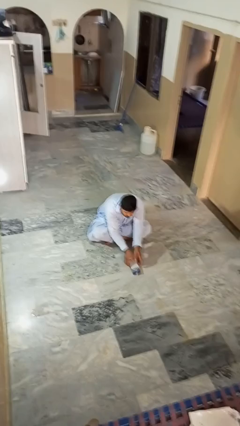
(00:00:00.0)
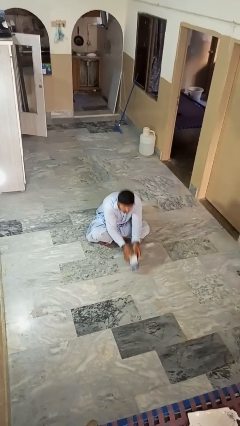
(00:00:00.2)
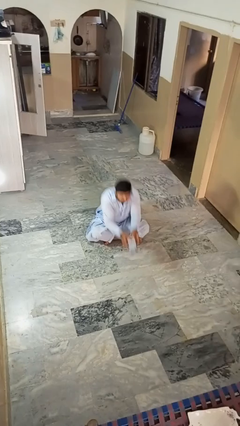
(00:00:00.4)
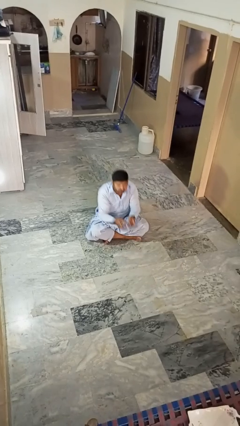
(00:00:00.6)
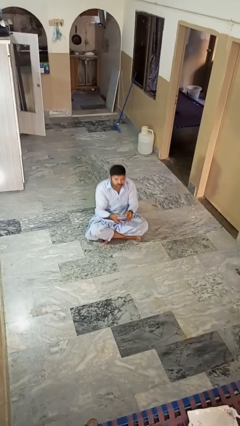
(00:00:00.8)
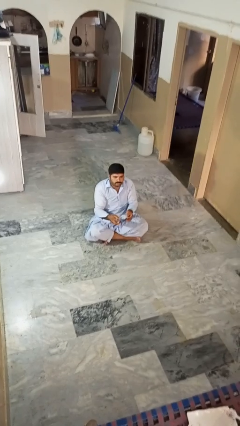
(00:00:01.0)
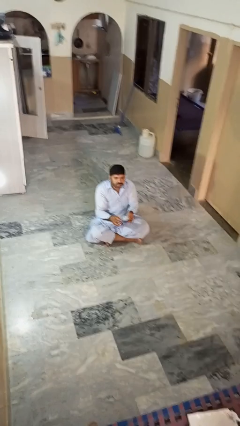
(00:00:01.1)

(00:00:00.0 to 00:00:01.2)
person picks up object from floor

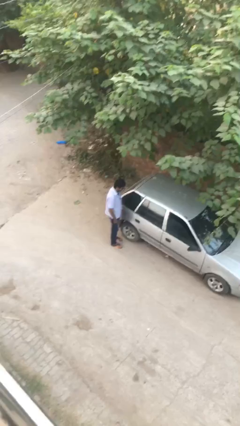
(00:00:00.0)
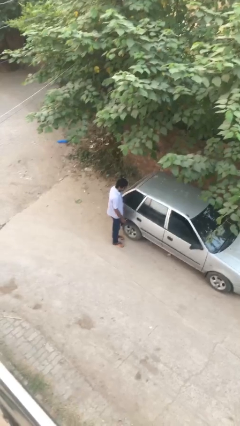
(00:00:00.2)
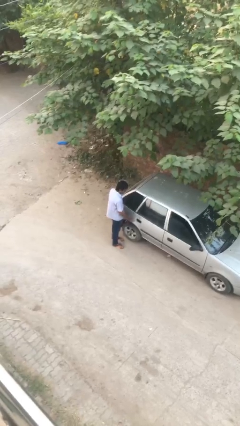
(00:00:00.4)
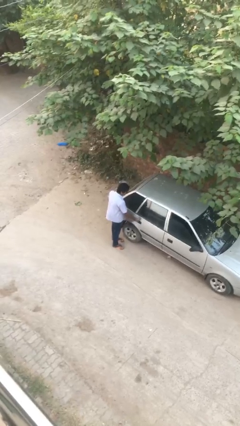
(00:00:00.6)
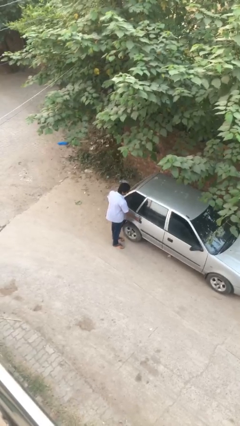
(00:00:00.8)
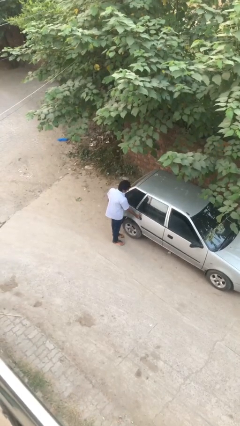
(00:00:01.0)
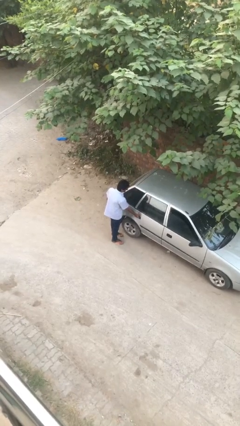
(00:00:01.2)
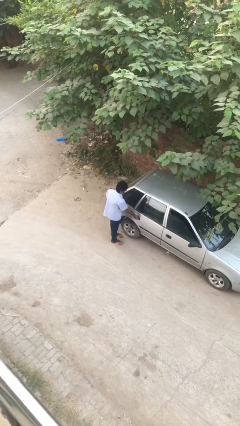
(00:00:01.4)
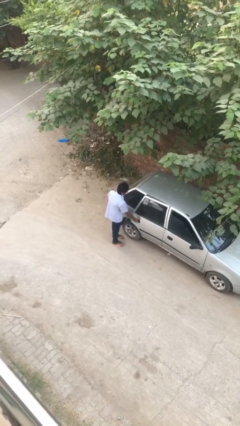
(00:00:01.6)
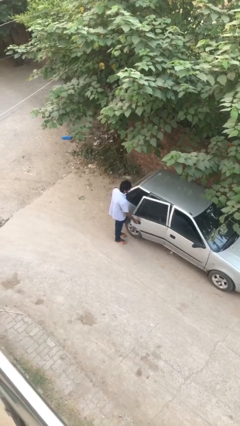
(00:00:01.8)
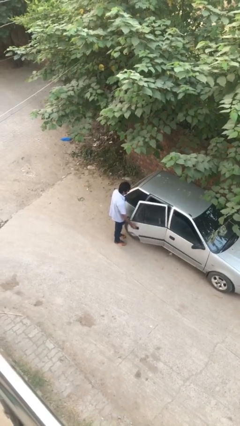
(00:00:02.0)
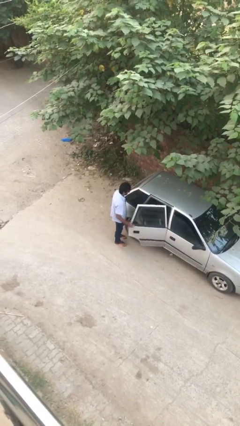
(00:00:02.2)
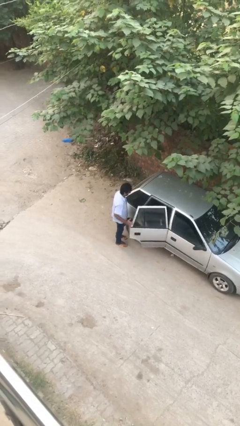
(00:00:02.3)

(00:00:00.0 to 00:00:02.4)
person opens car door

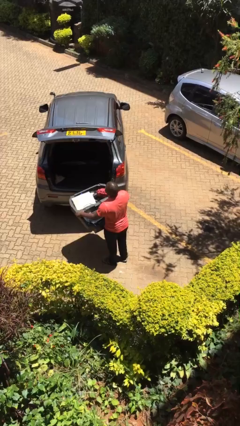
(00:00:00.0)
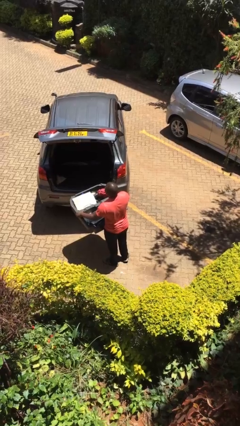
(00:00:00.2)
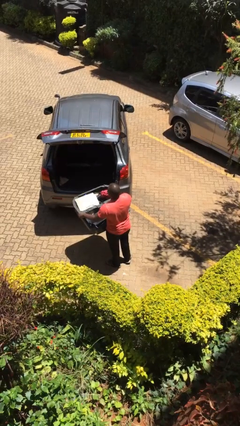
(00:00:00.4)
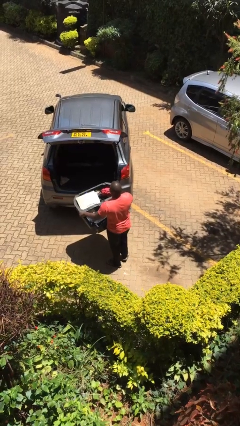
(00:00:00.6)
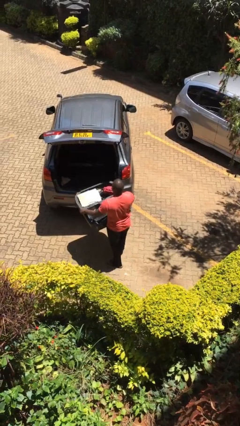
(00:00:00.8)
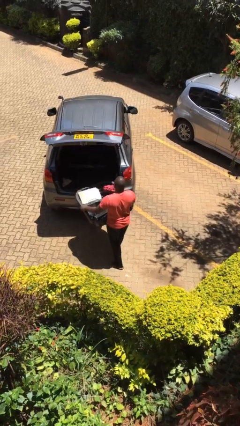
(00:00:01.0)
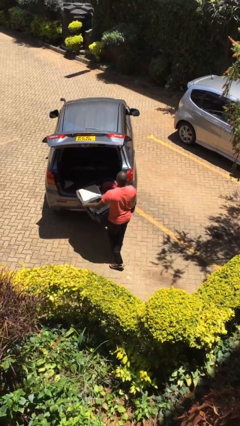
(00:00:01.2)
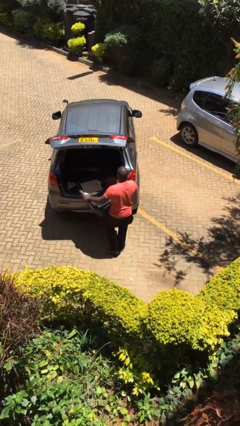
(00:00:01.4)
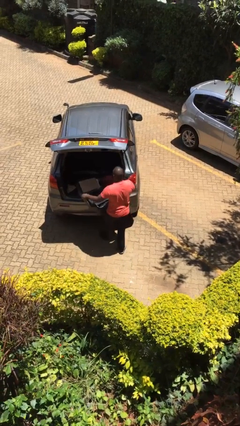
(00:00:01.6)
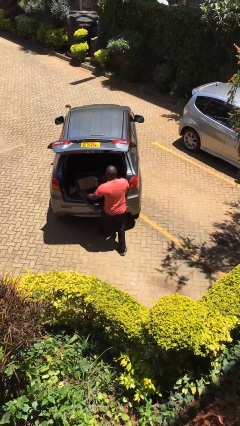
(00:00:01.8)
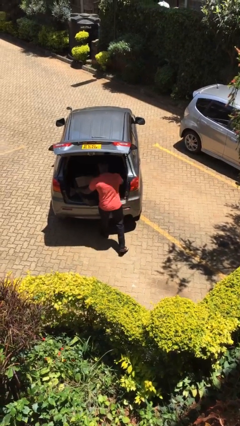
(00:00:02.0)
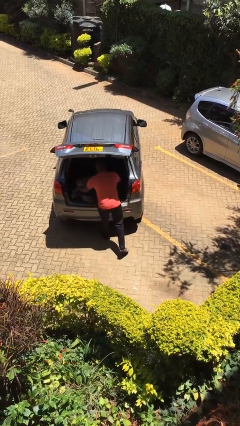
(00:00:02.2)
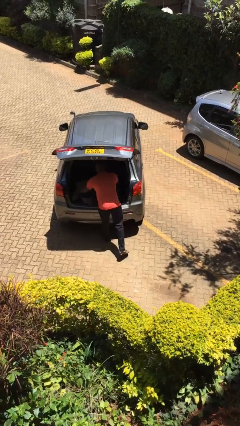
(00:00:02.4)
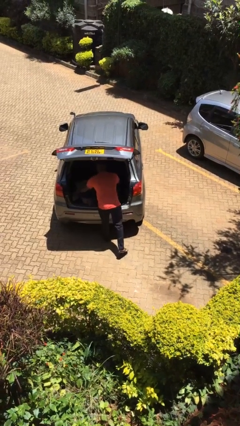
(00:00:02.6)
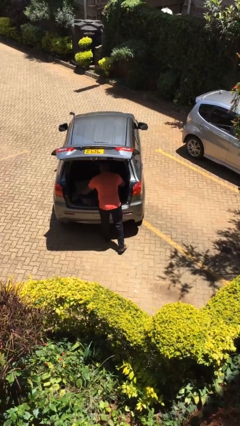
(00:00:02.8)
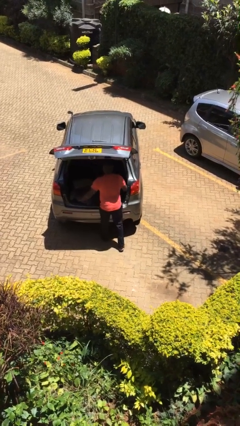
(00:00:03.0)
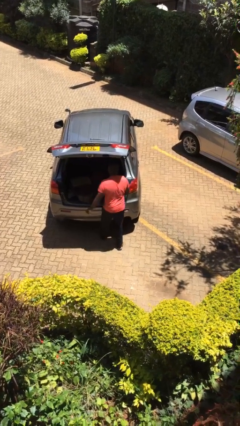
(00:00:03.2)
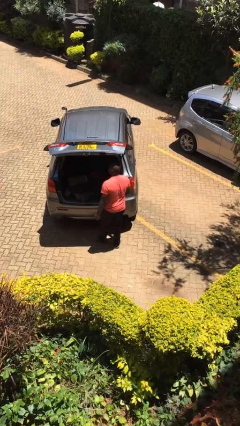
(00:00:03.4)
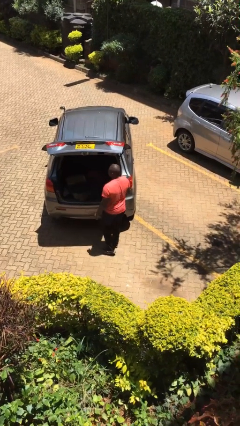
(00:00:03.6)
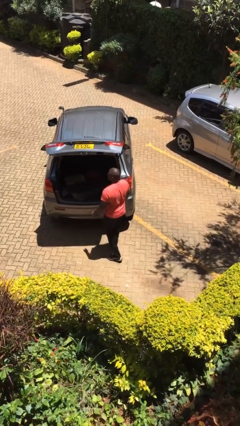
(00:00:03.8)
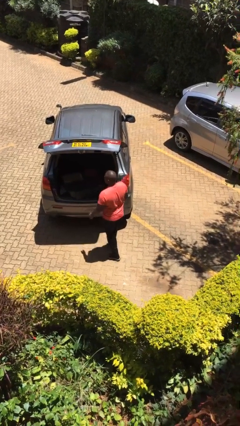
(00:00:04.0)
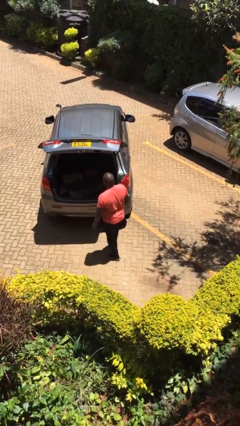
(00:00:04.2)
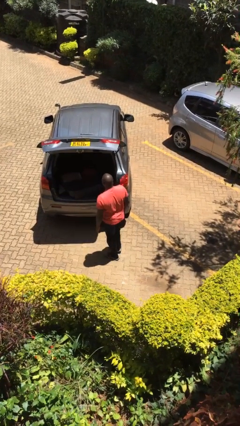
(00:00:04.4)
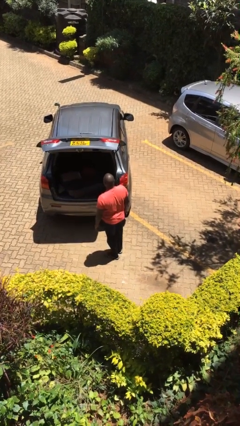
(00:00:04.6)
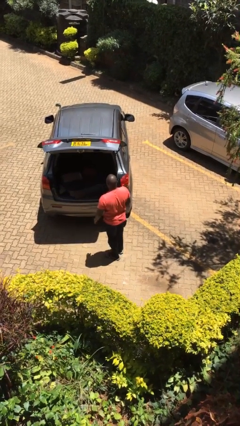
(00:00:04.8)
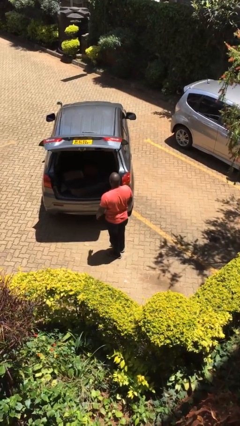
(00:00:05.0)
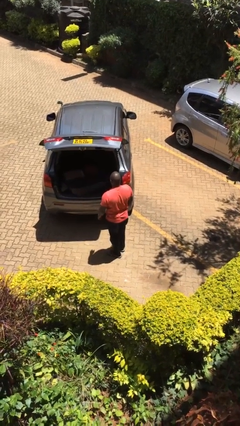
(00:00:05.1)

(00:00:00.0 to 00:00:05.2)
person loads car

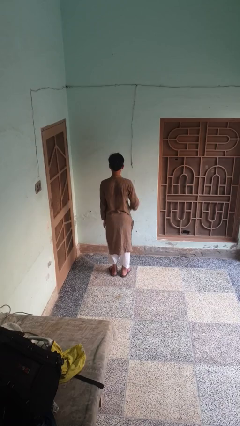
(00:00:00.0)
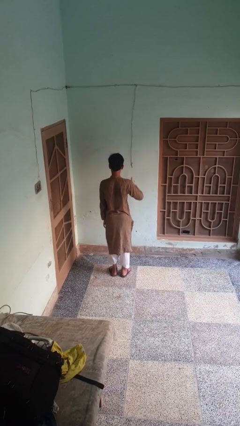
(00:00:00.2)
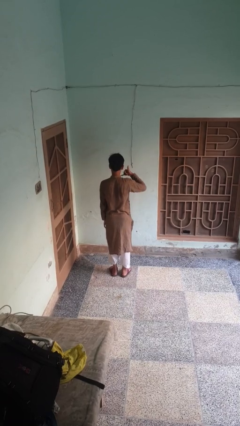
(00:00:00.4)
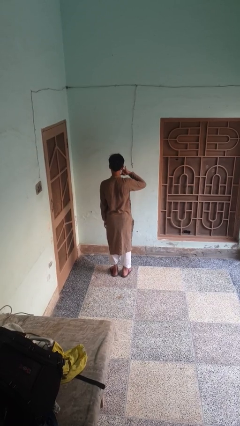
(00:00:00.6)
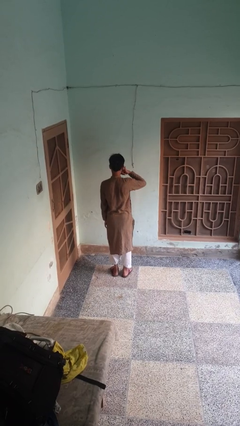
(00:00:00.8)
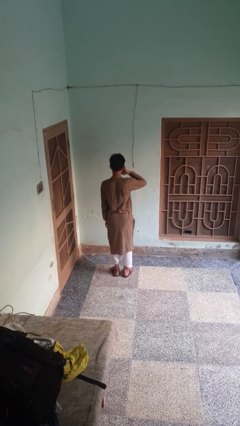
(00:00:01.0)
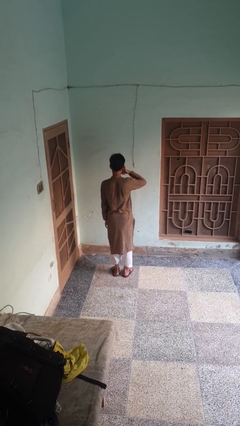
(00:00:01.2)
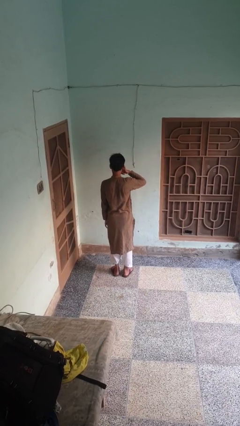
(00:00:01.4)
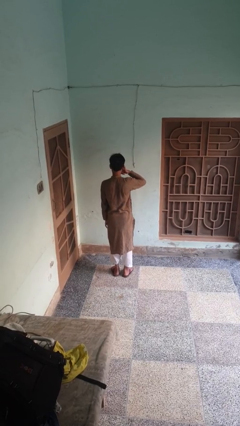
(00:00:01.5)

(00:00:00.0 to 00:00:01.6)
person gestures call me

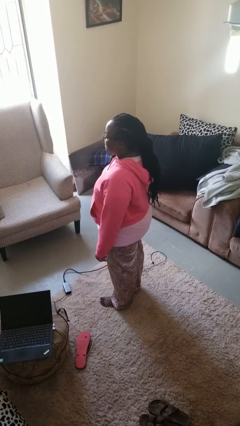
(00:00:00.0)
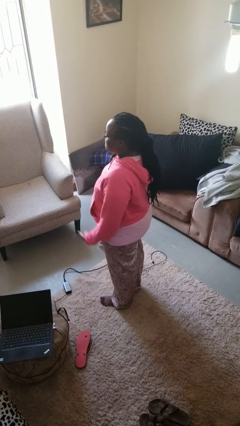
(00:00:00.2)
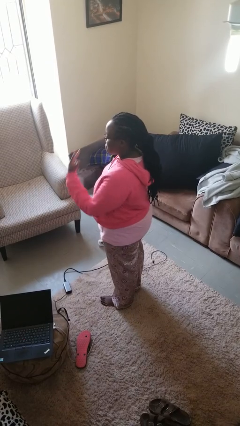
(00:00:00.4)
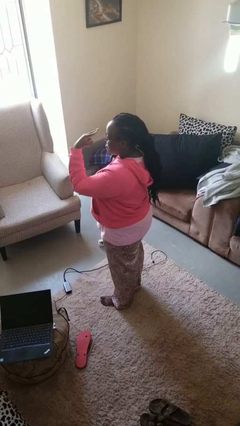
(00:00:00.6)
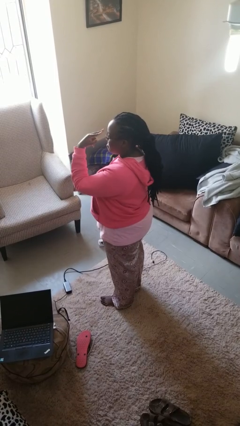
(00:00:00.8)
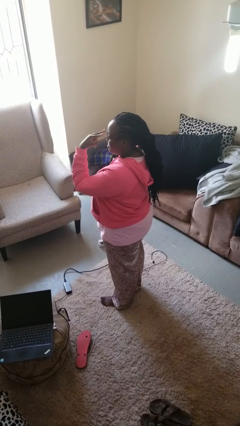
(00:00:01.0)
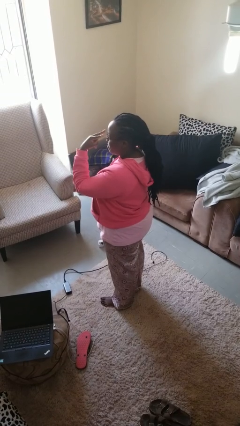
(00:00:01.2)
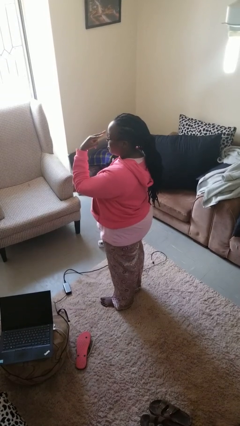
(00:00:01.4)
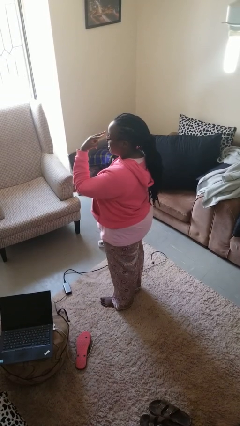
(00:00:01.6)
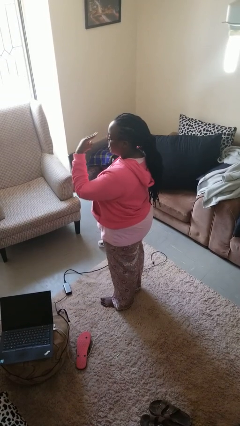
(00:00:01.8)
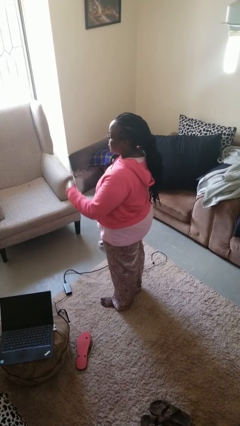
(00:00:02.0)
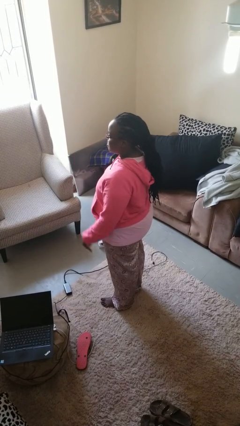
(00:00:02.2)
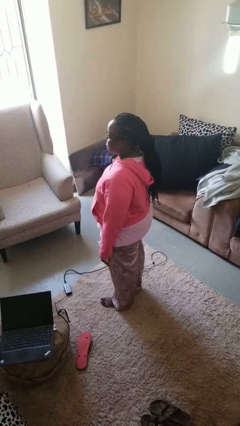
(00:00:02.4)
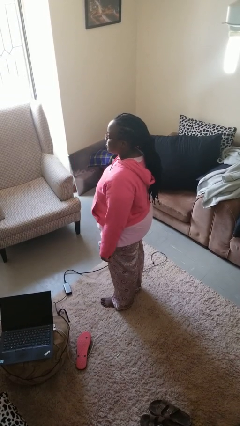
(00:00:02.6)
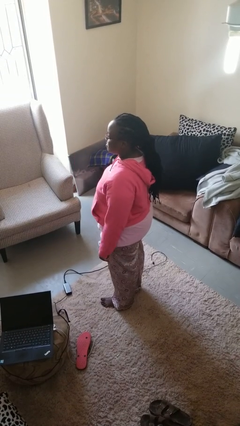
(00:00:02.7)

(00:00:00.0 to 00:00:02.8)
person gestures watch closely

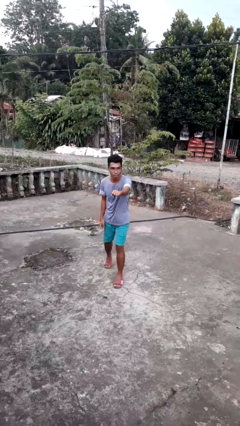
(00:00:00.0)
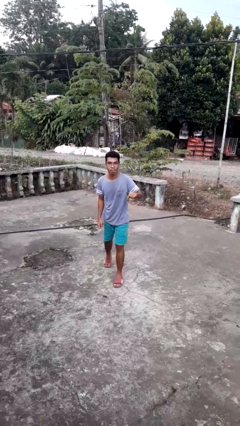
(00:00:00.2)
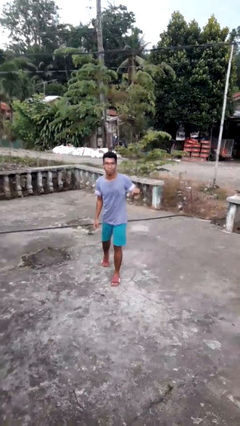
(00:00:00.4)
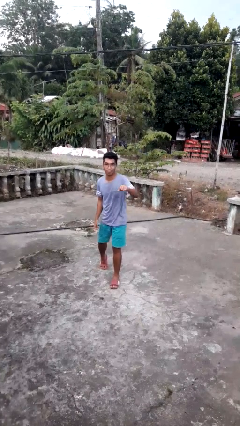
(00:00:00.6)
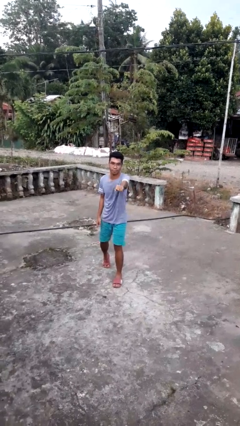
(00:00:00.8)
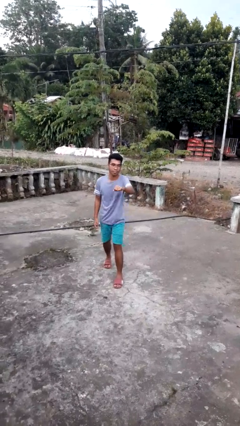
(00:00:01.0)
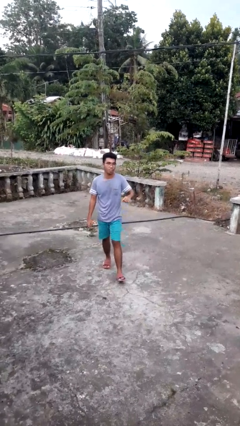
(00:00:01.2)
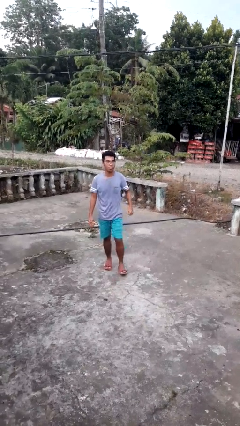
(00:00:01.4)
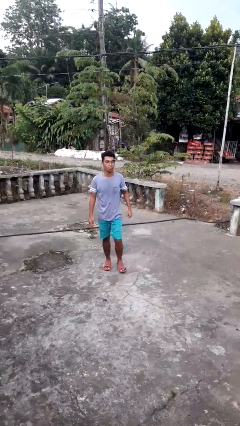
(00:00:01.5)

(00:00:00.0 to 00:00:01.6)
person punches

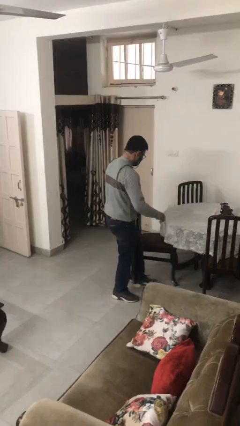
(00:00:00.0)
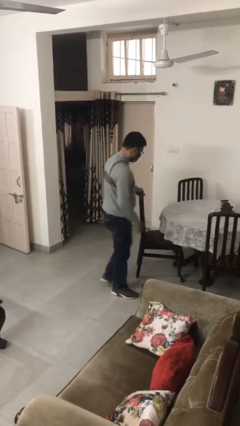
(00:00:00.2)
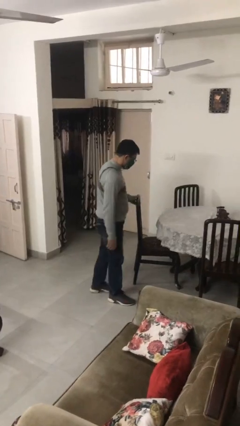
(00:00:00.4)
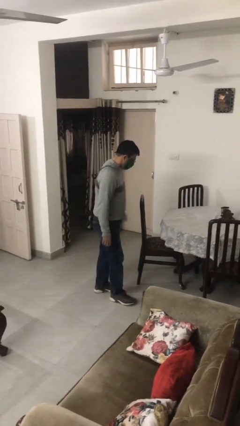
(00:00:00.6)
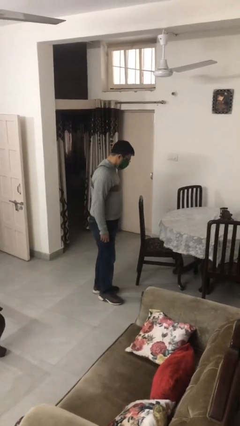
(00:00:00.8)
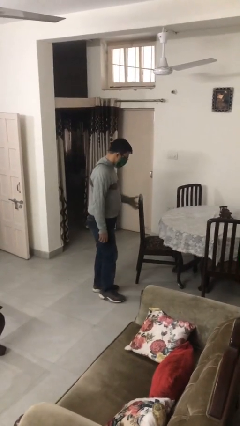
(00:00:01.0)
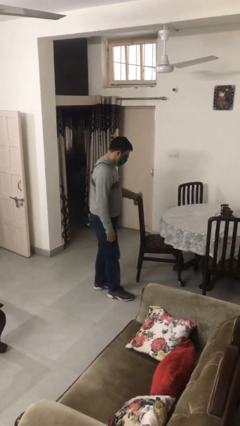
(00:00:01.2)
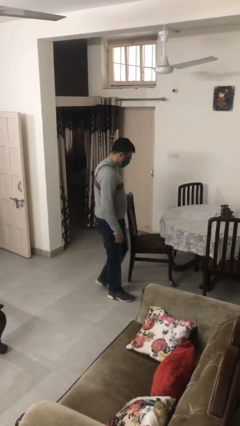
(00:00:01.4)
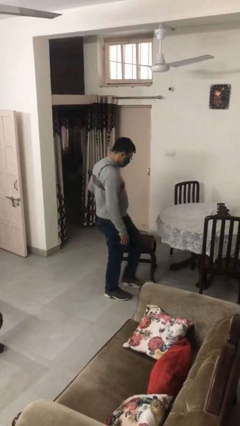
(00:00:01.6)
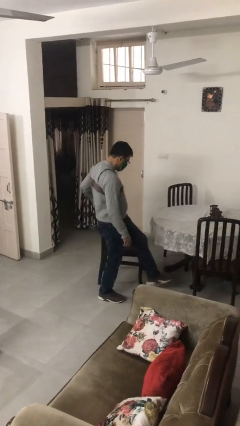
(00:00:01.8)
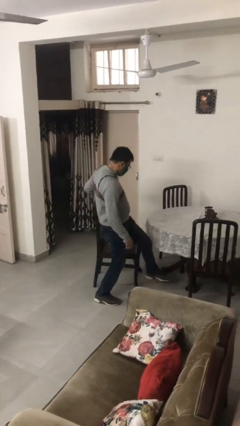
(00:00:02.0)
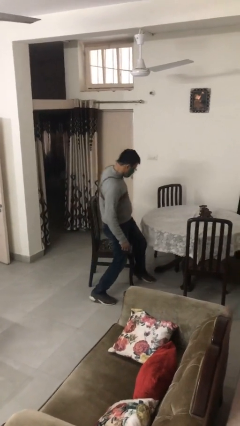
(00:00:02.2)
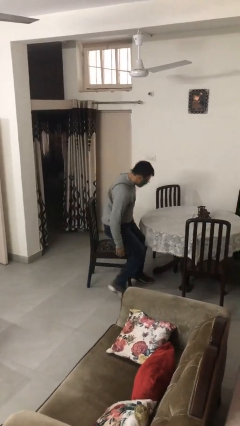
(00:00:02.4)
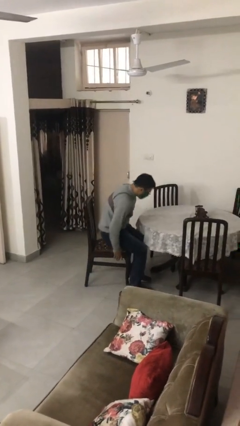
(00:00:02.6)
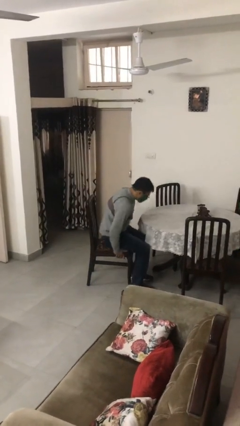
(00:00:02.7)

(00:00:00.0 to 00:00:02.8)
person sits down
